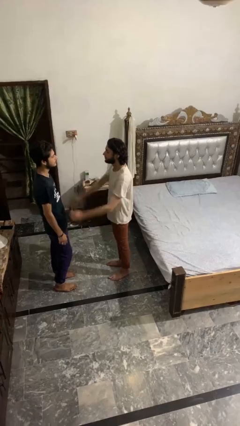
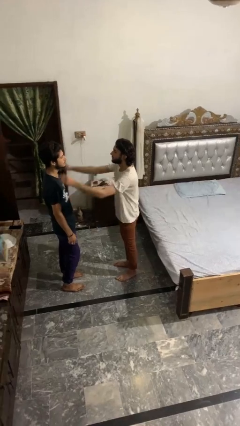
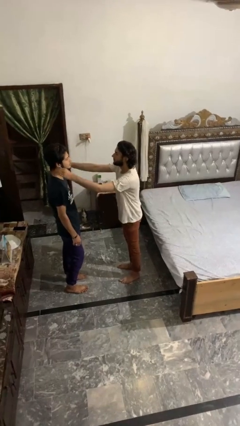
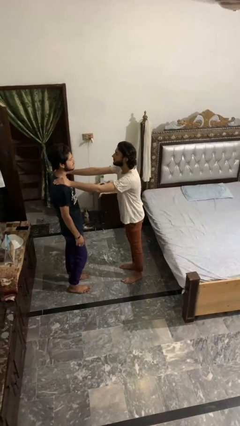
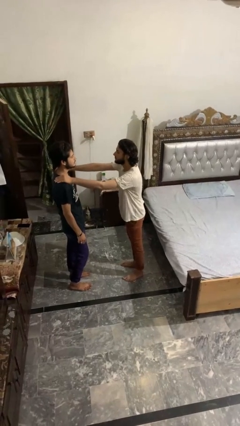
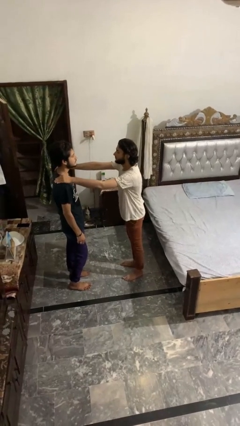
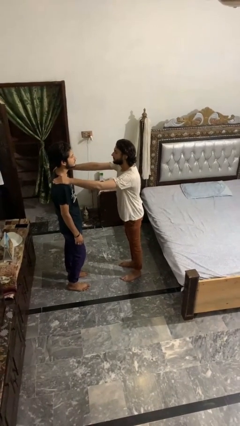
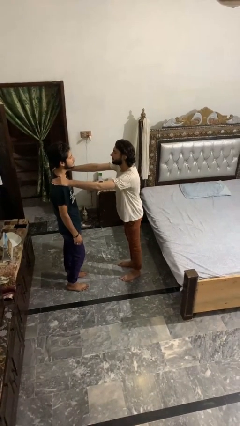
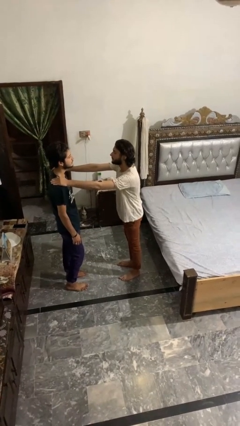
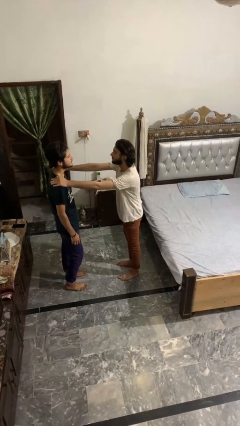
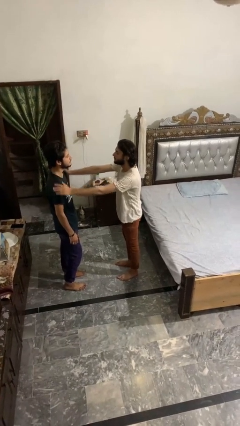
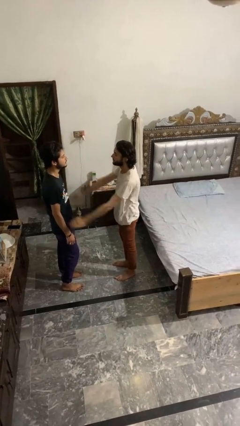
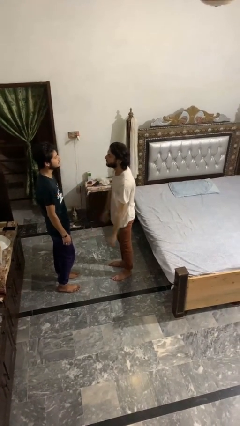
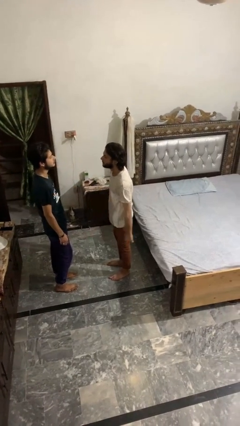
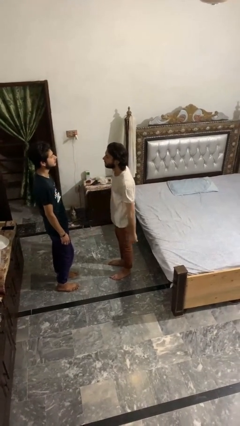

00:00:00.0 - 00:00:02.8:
person pounds shoulders of person

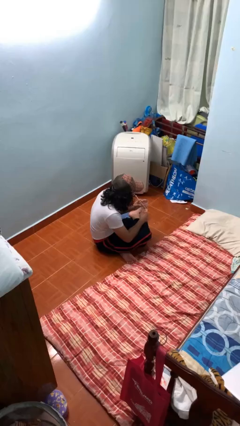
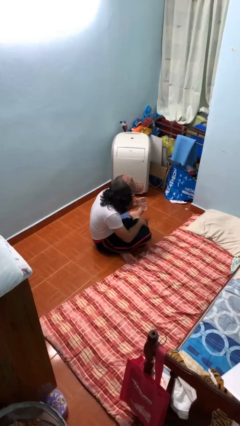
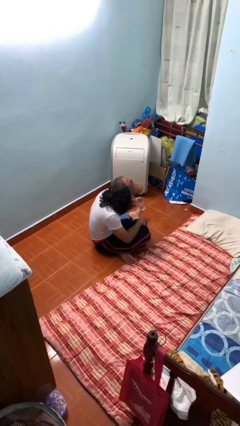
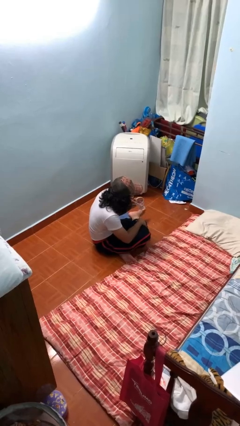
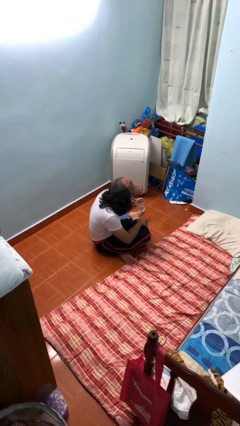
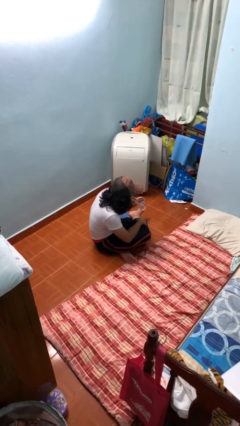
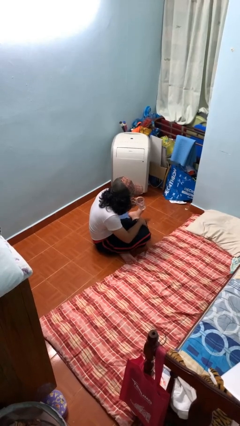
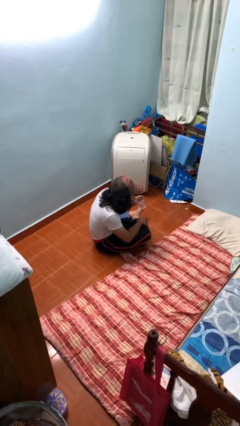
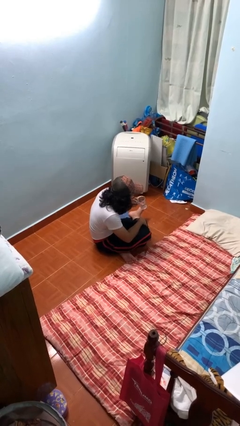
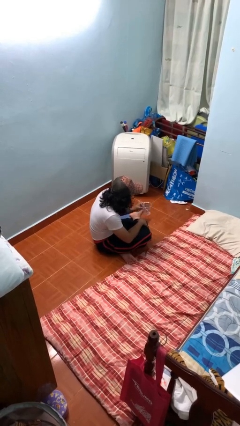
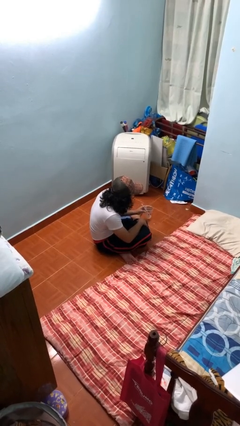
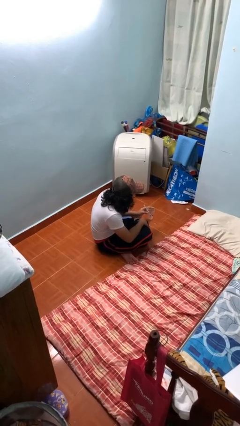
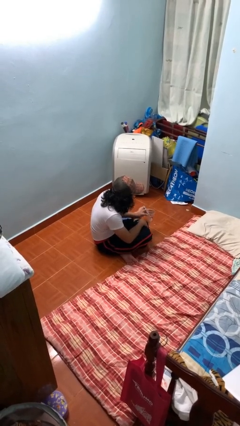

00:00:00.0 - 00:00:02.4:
person drinks from straw

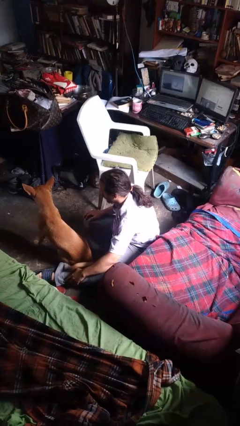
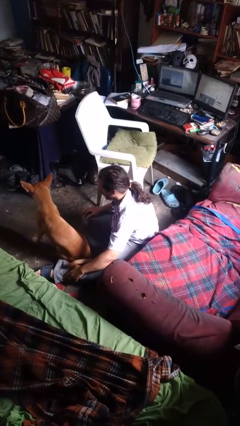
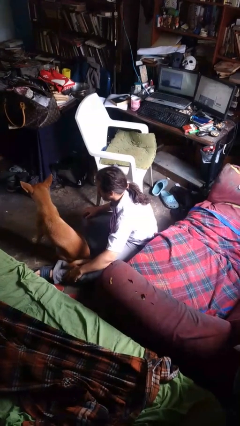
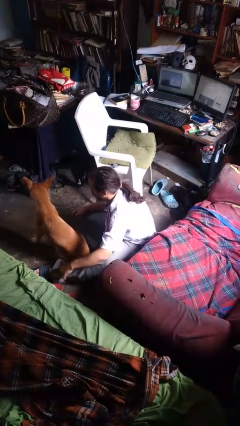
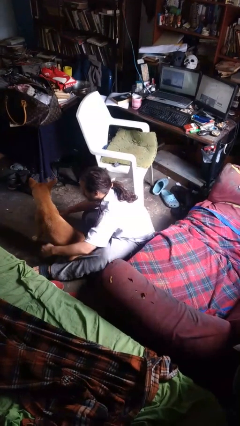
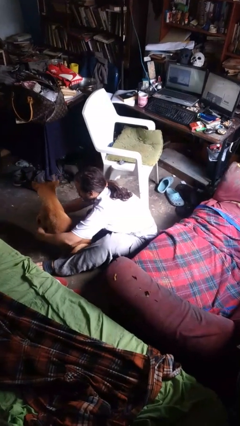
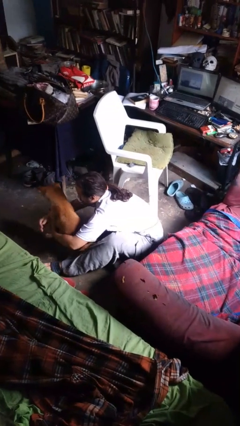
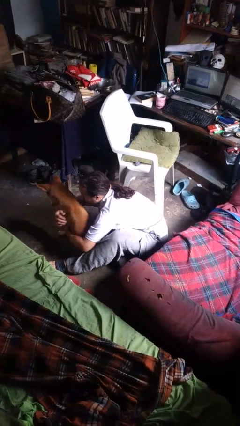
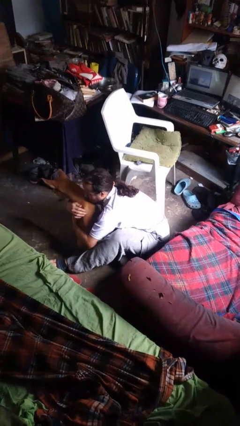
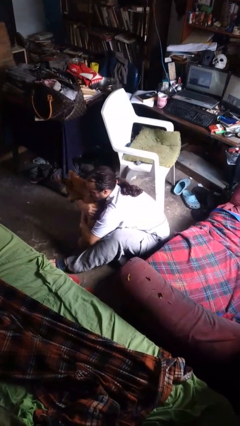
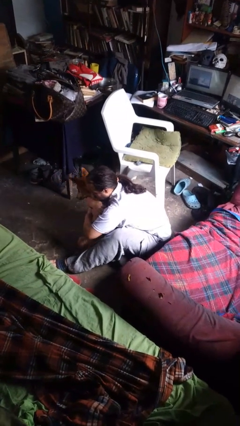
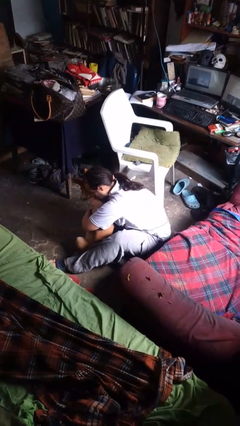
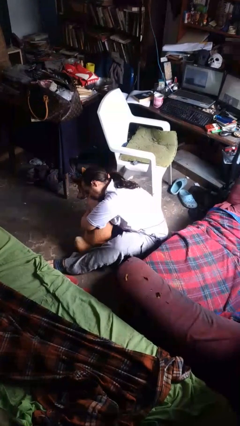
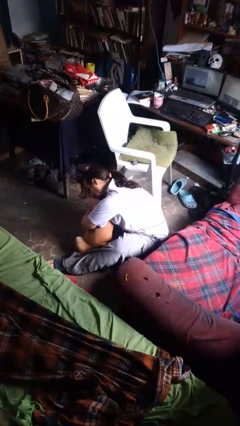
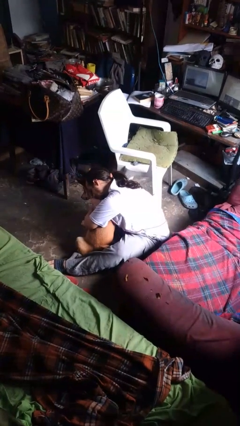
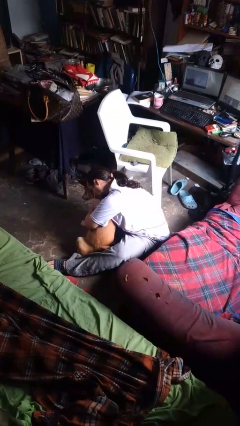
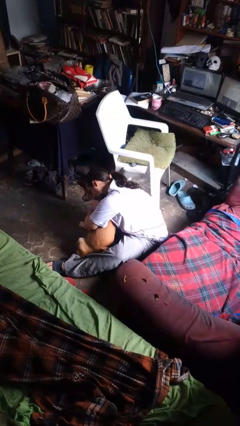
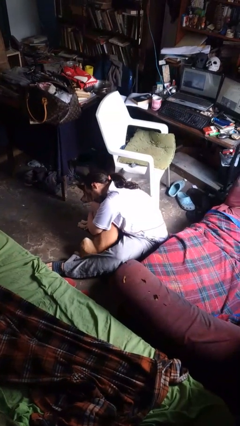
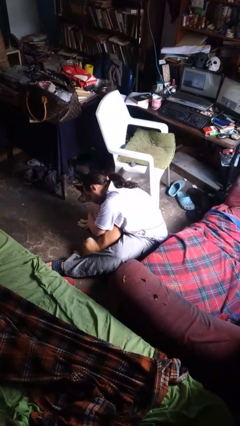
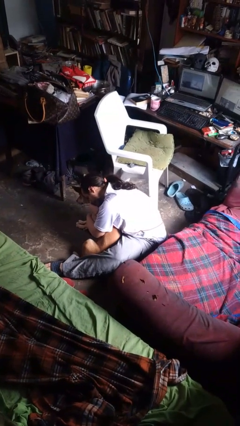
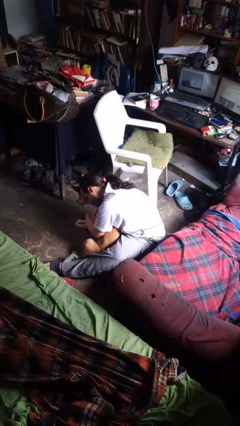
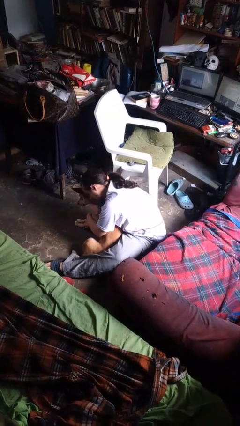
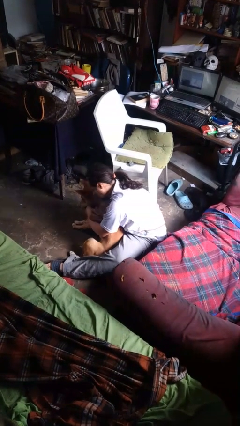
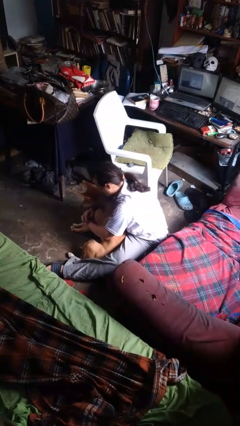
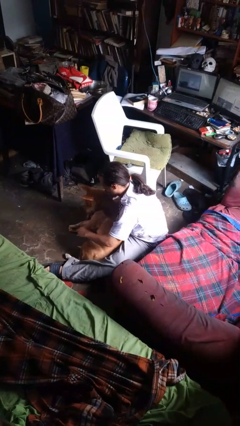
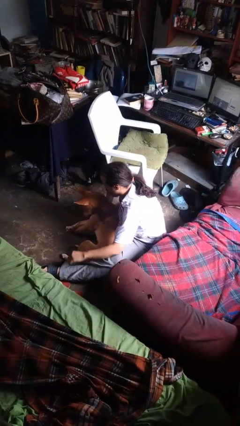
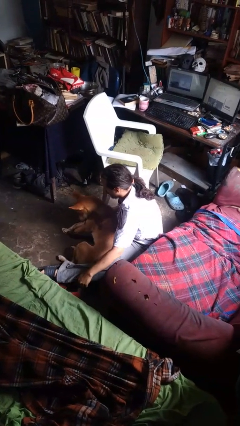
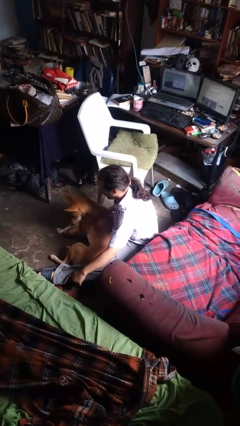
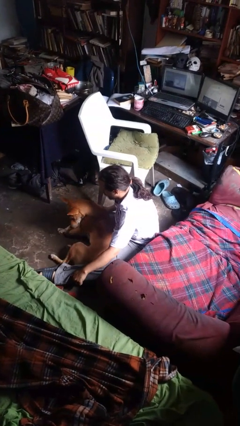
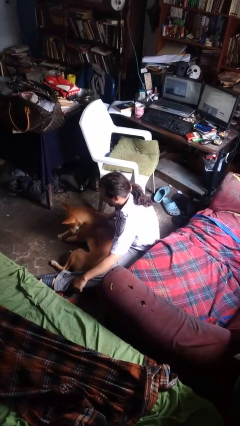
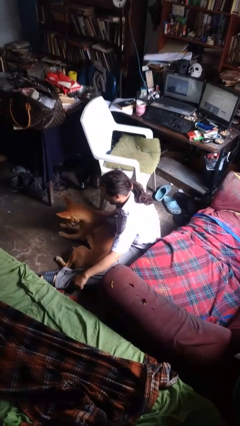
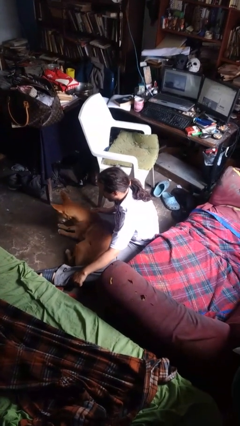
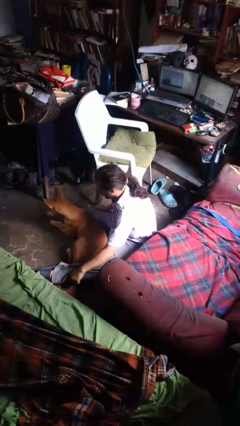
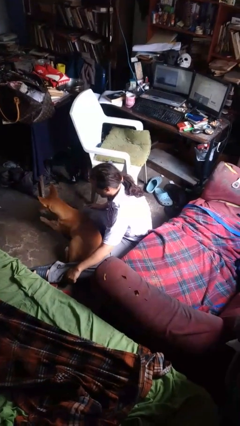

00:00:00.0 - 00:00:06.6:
person hugs dog

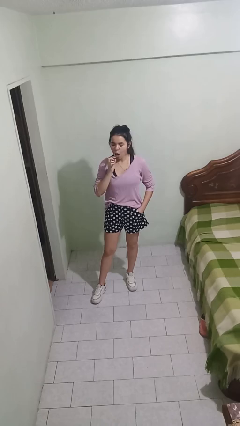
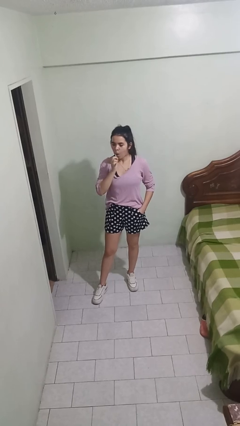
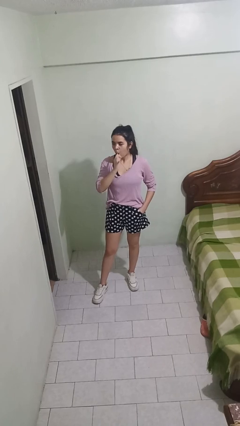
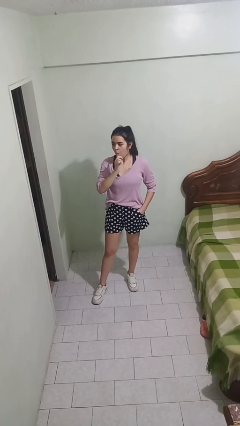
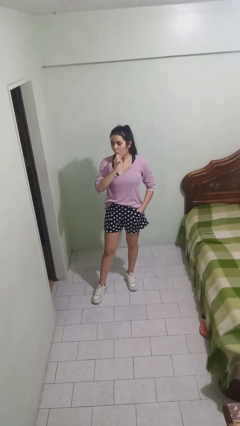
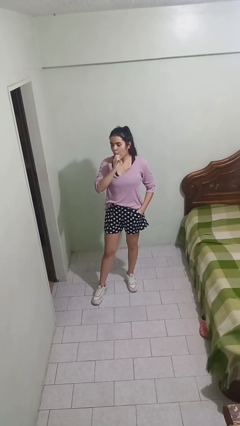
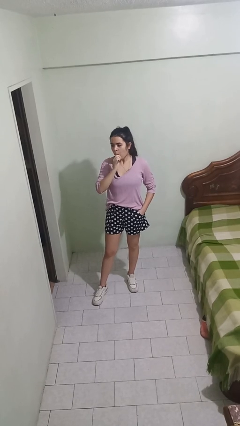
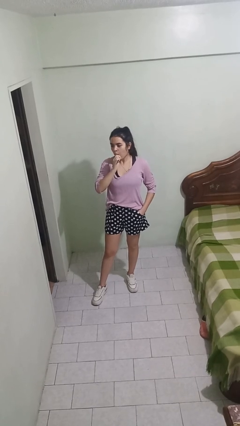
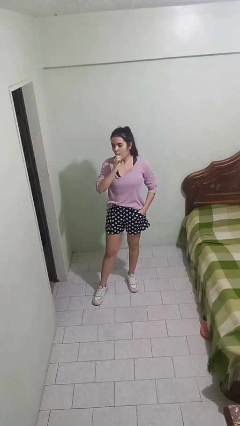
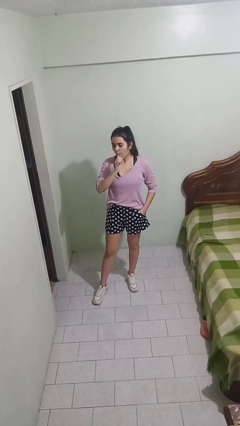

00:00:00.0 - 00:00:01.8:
person brushes teeth

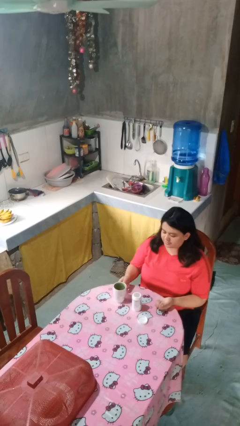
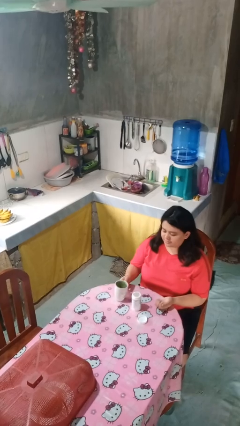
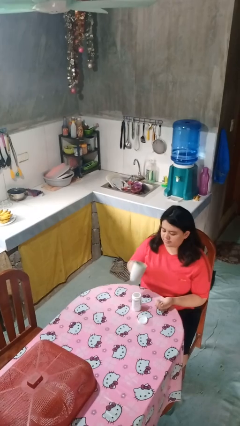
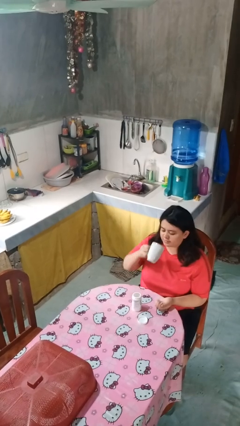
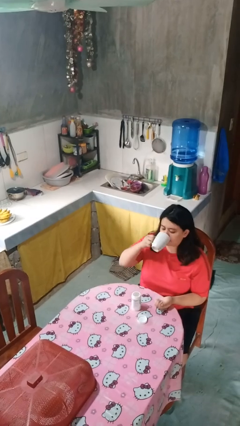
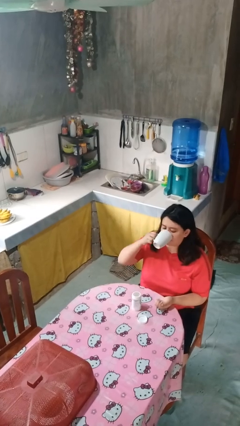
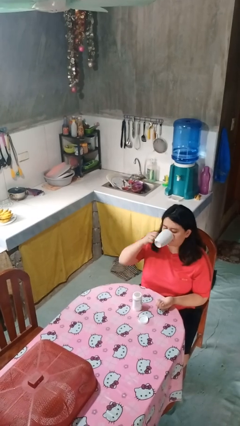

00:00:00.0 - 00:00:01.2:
person drinks from cup

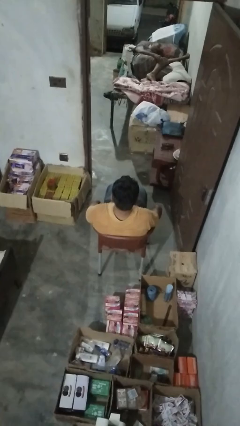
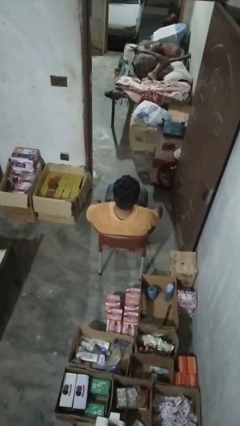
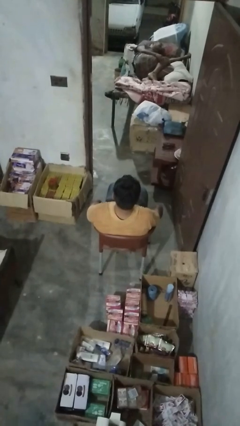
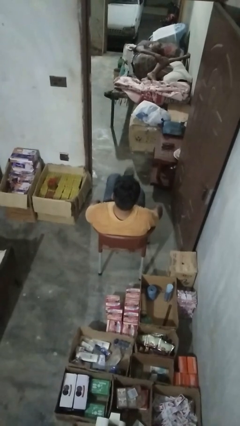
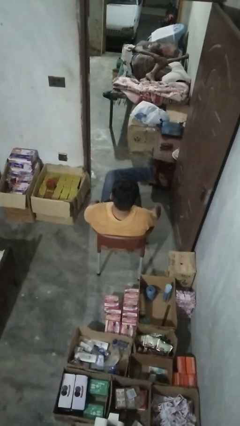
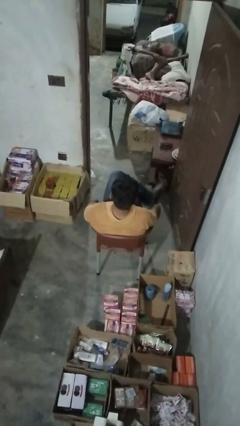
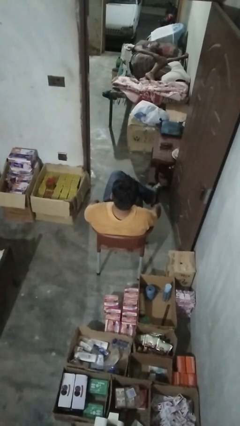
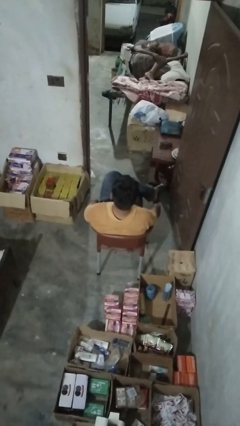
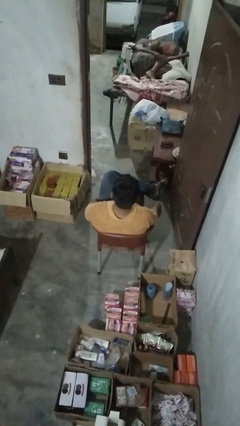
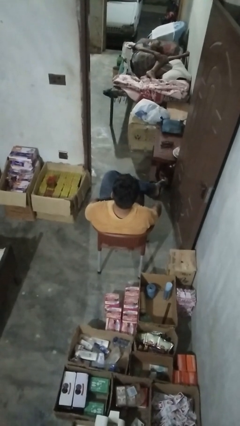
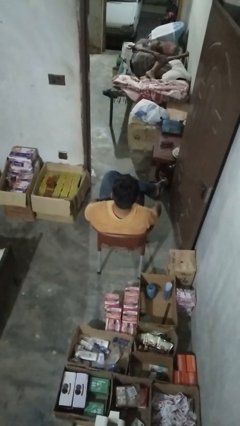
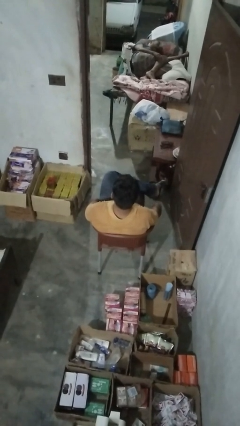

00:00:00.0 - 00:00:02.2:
person crosses legs

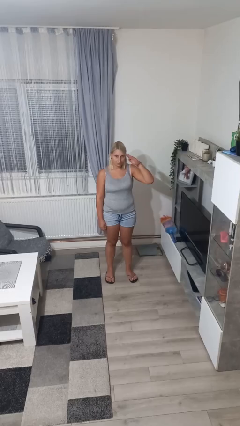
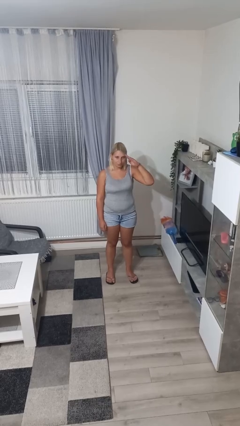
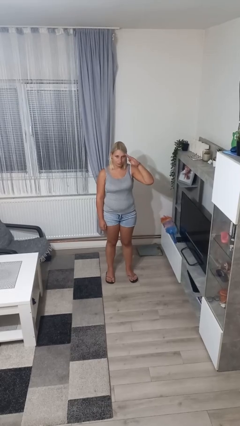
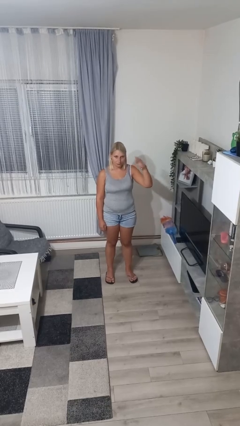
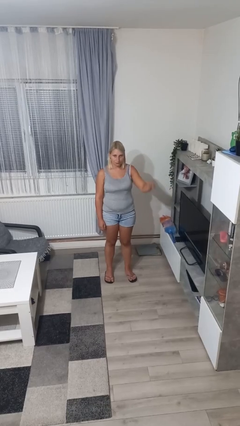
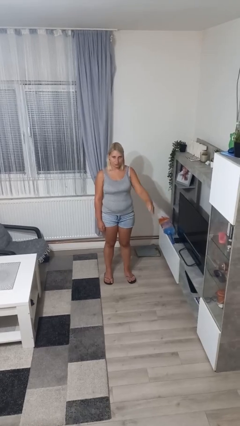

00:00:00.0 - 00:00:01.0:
person salutes
